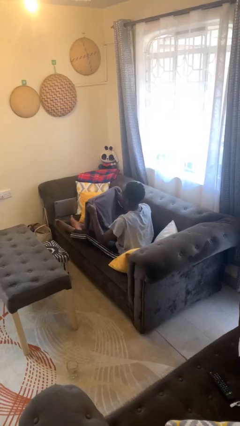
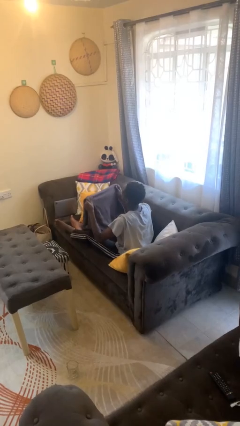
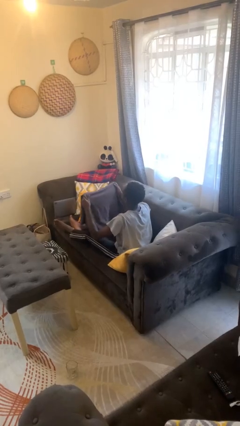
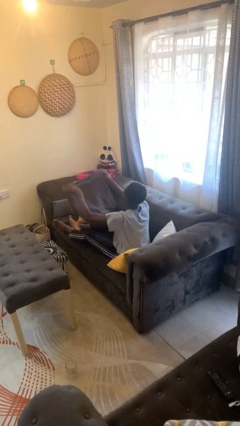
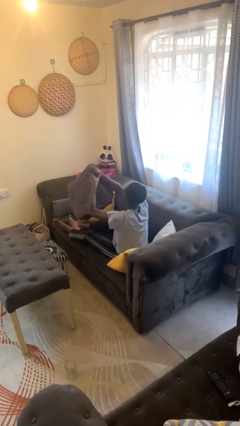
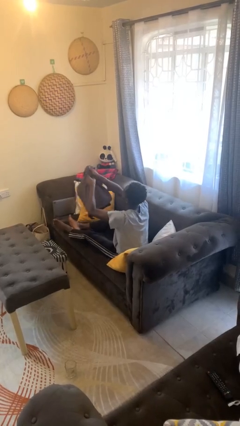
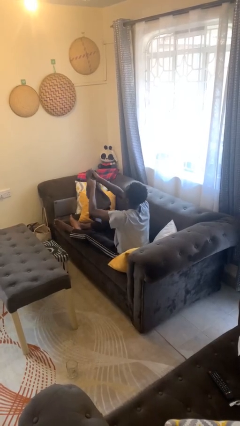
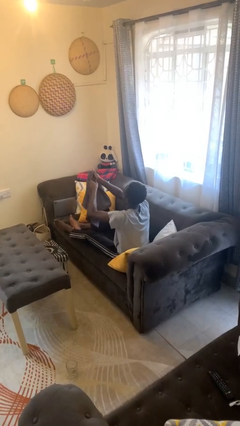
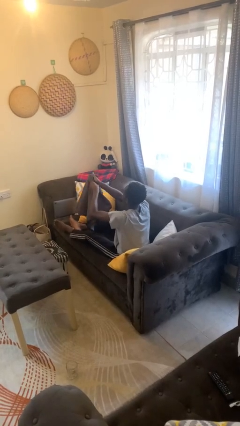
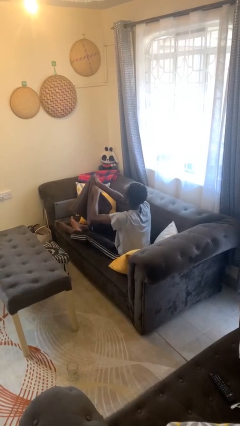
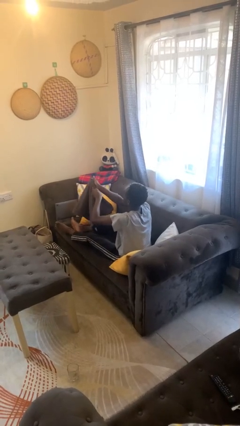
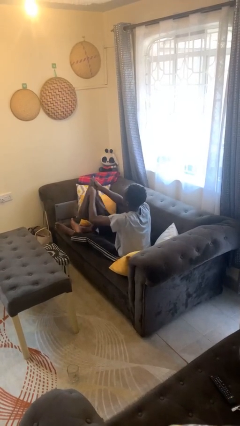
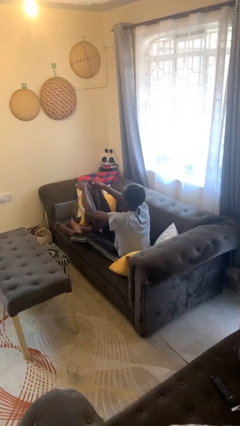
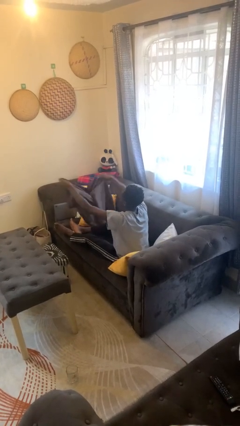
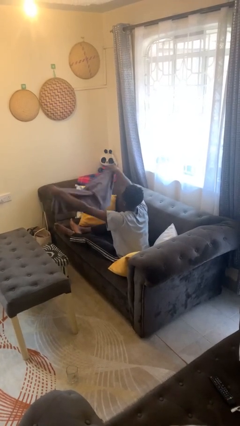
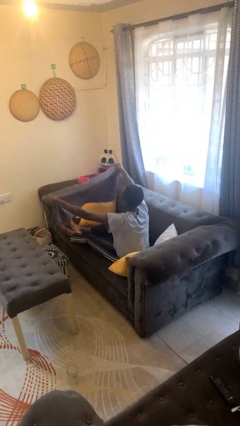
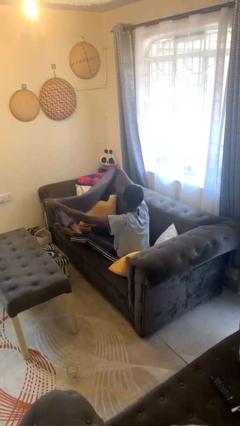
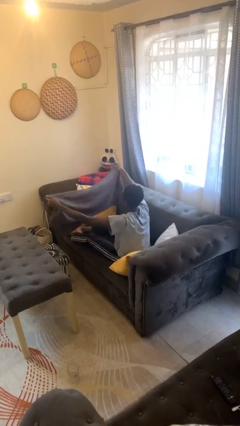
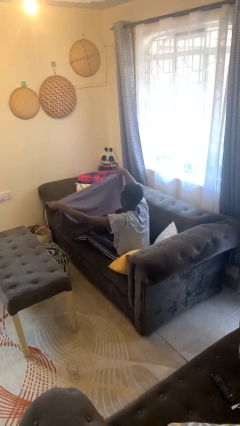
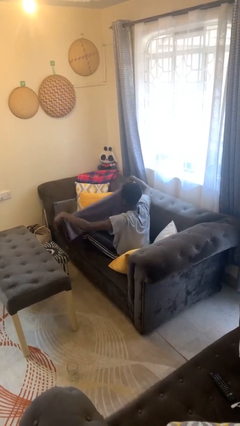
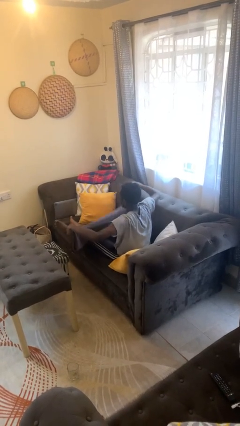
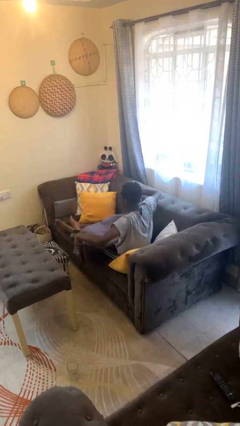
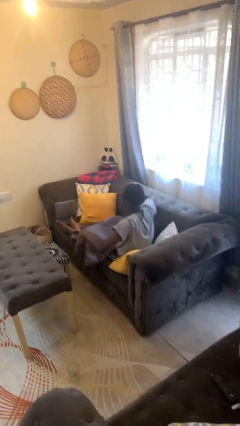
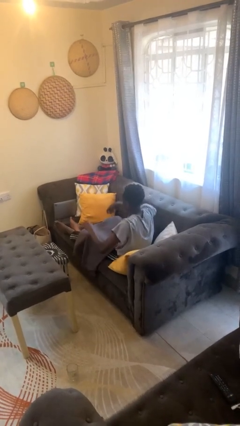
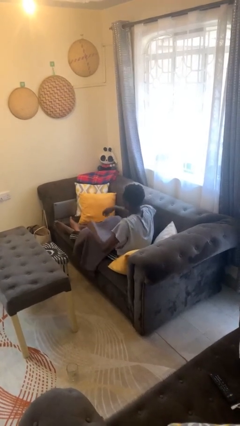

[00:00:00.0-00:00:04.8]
person unfolds blanket

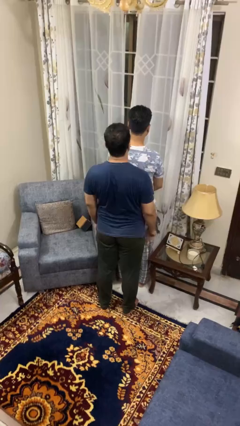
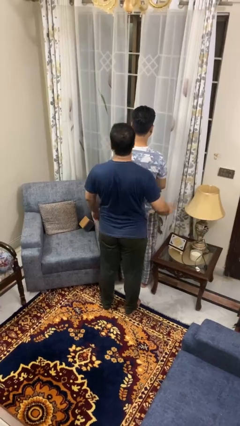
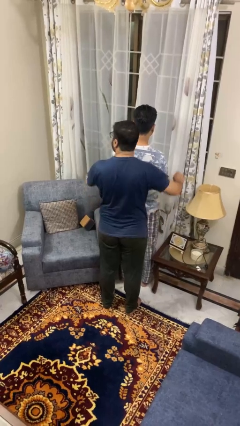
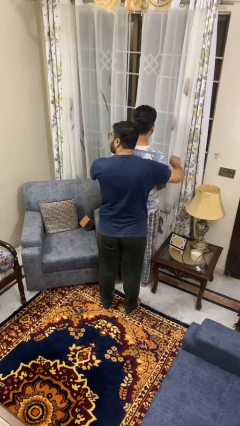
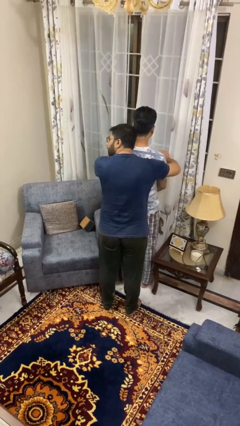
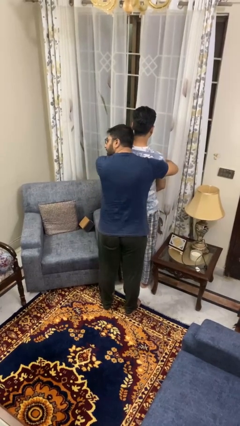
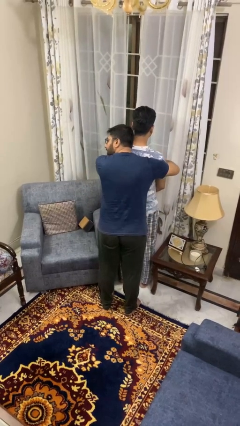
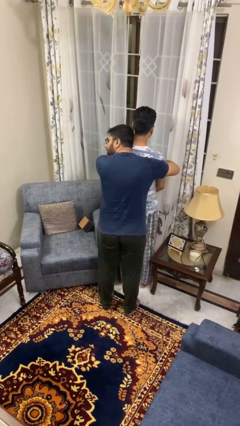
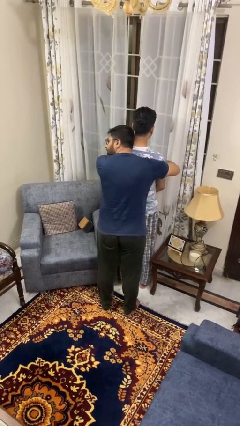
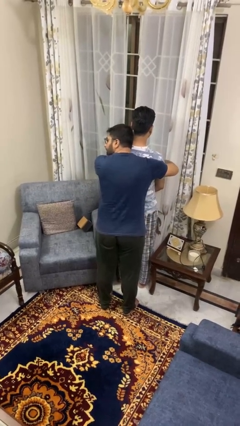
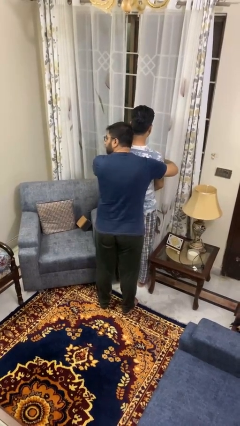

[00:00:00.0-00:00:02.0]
person hugs person from behind

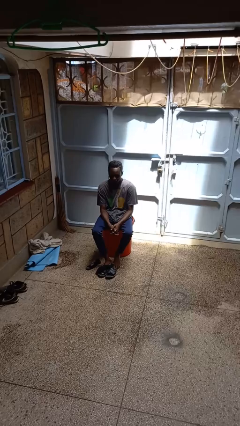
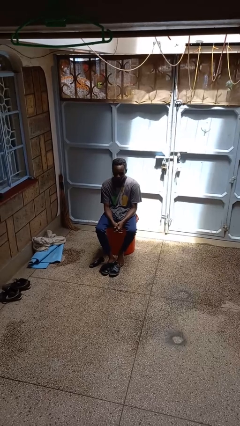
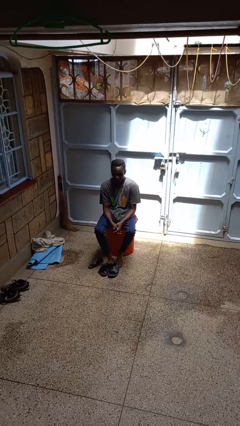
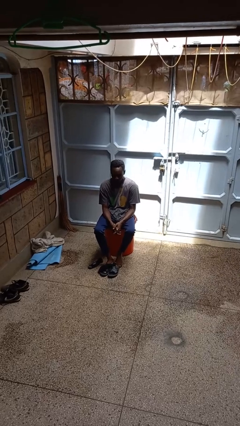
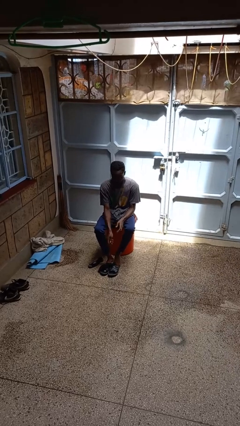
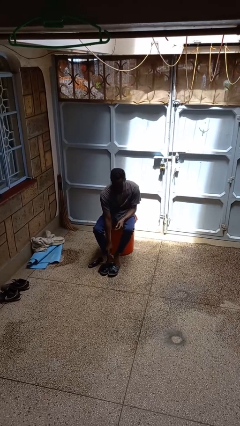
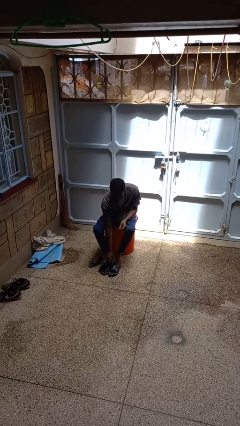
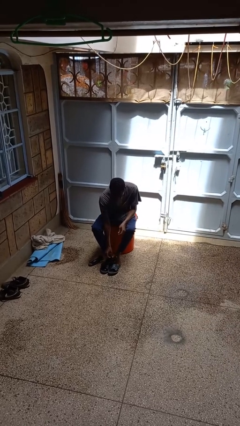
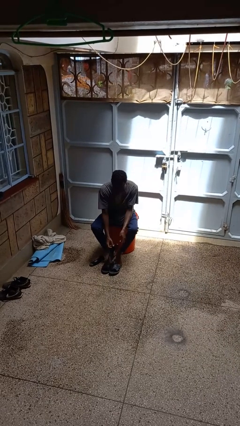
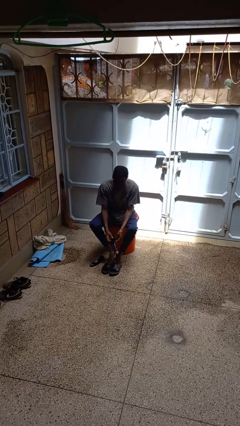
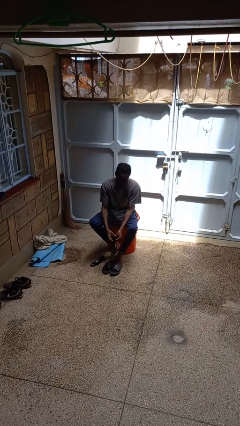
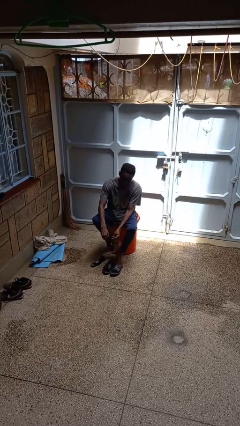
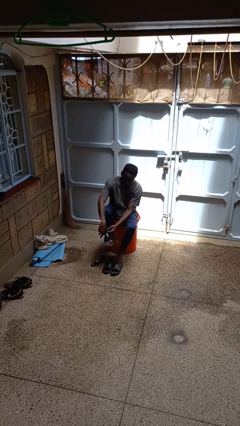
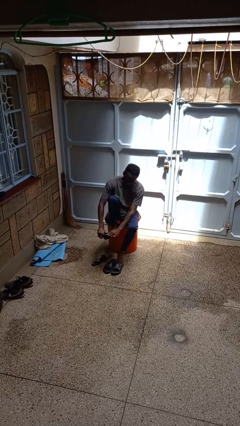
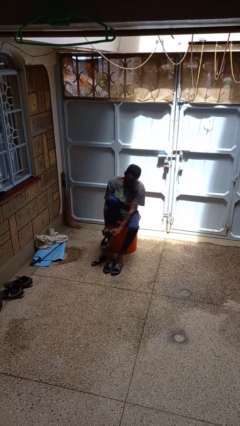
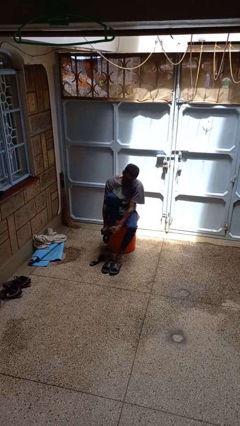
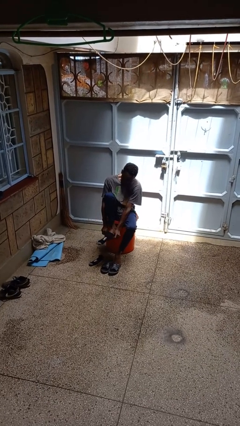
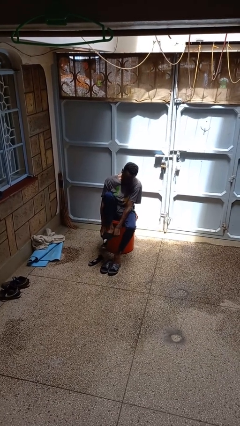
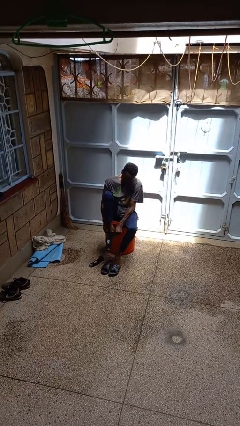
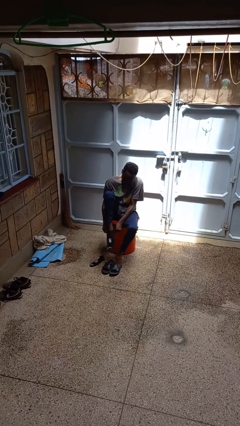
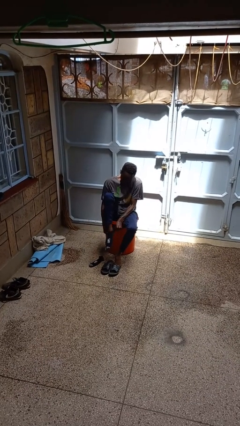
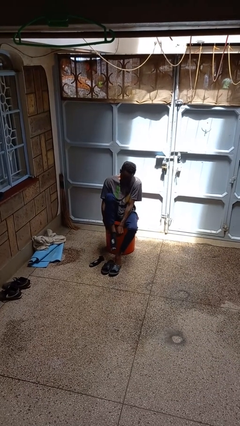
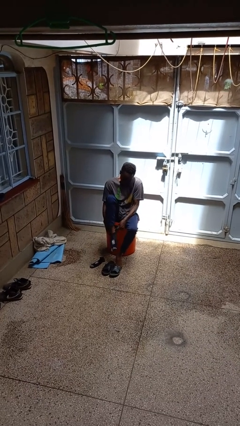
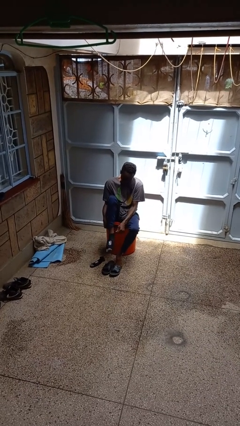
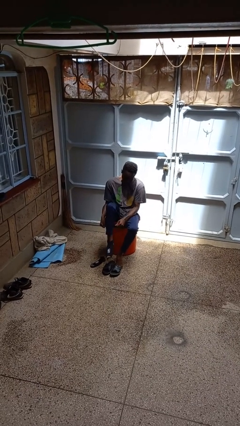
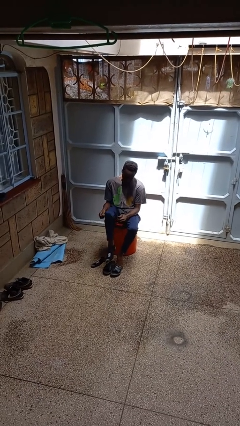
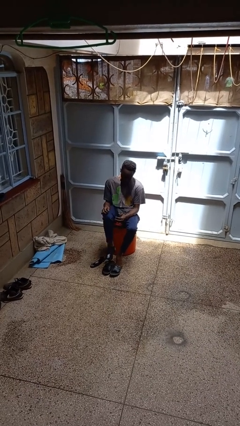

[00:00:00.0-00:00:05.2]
person puts on socks

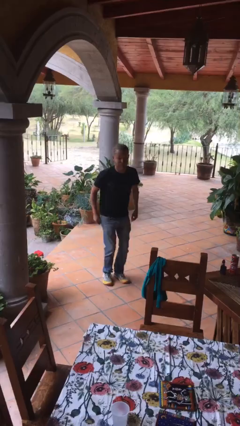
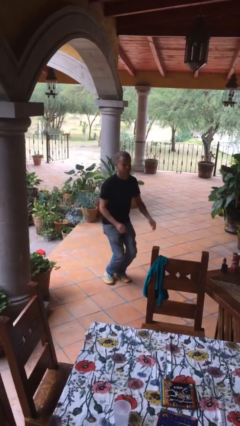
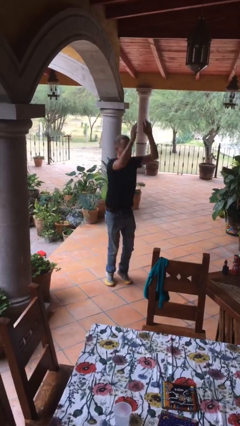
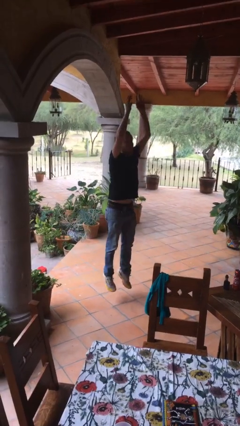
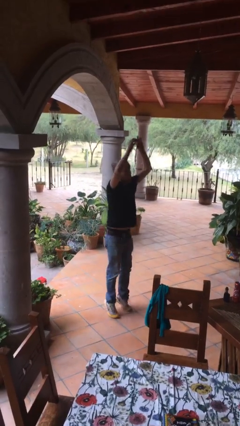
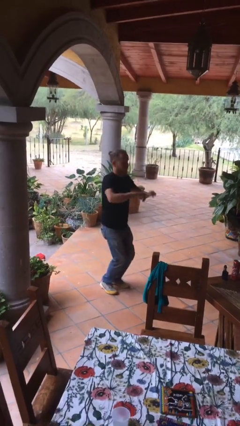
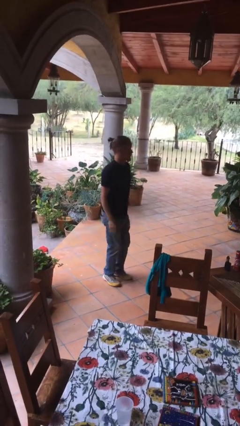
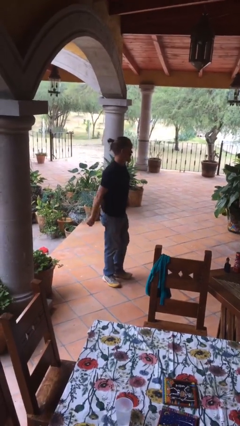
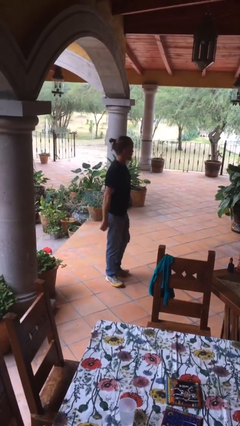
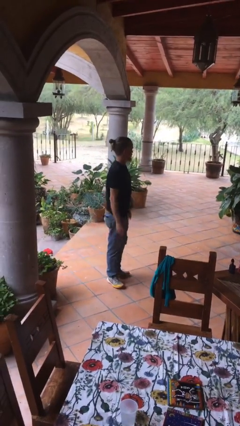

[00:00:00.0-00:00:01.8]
person jumps

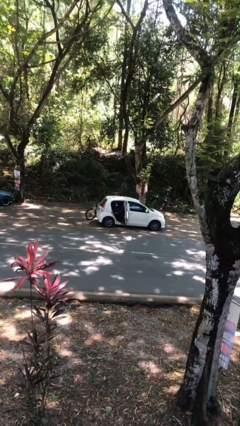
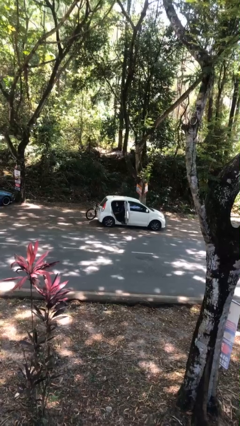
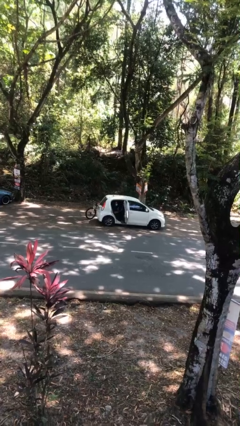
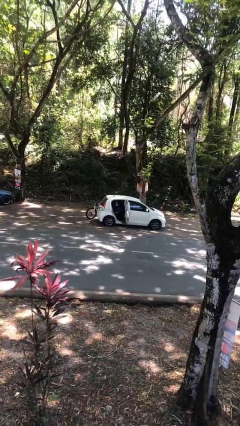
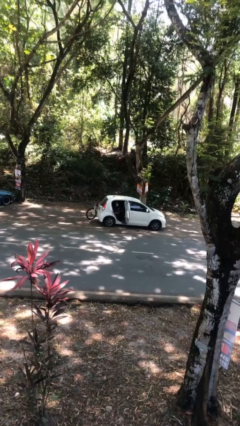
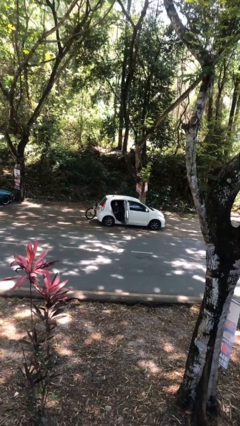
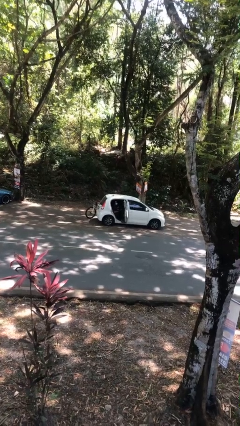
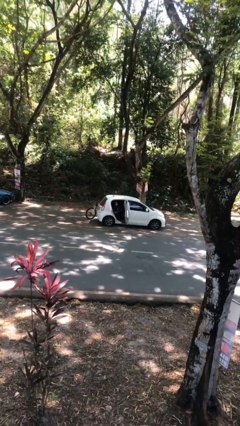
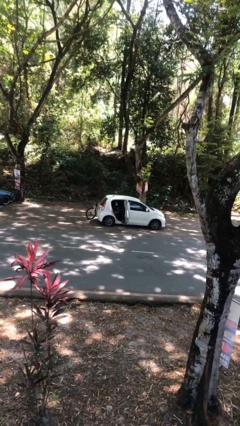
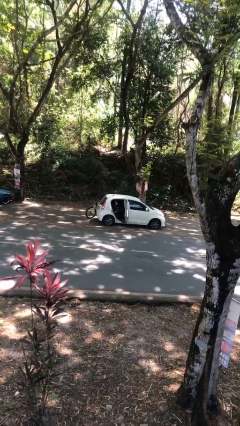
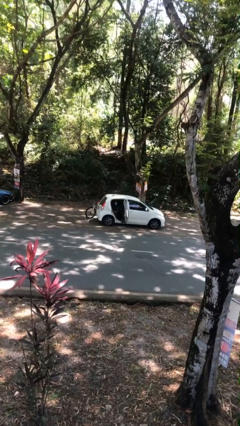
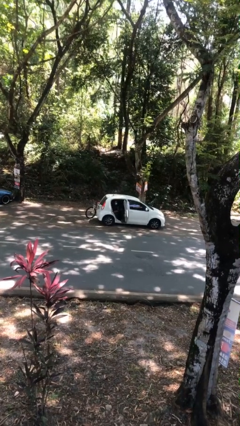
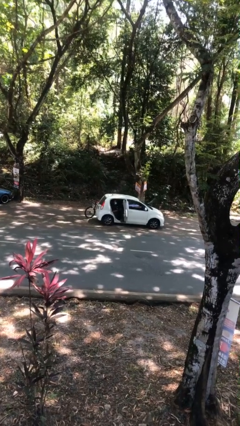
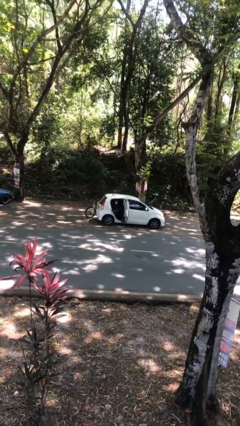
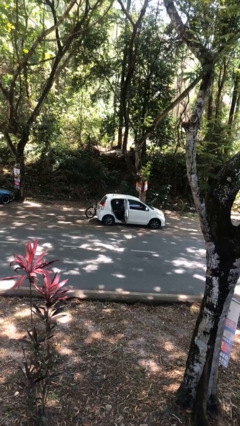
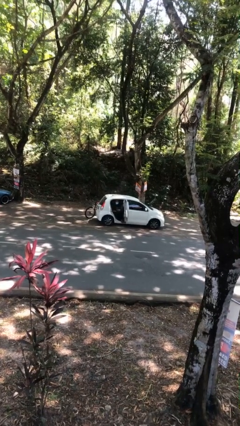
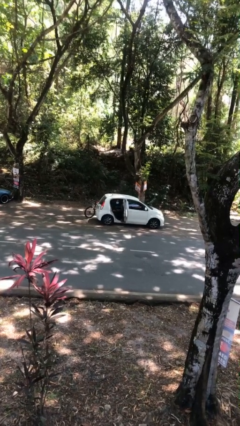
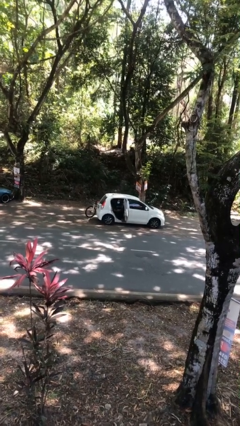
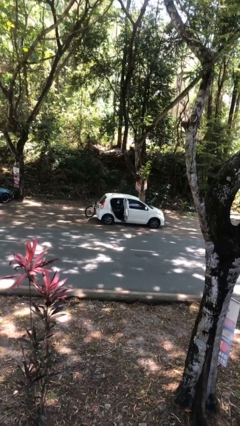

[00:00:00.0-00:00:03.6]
person interacts with laptop

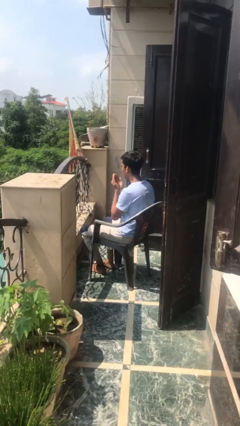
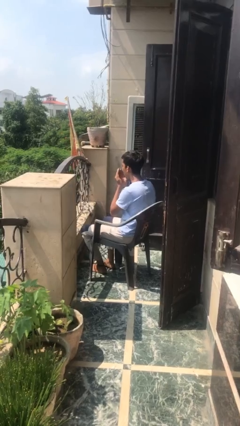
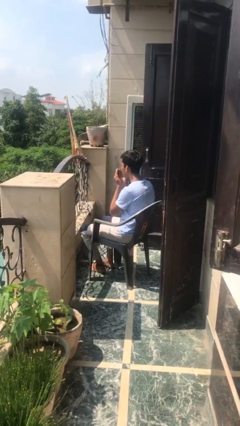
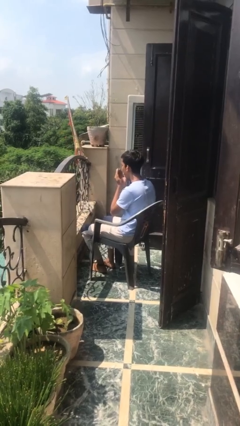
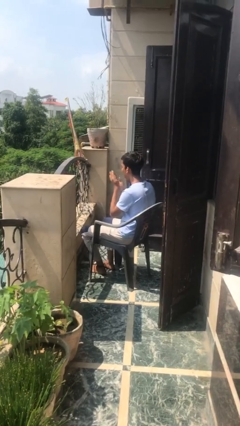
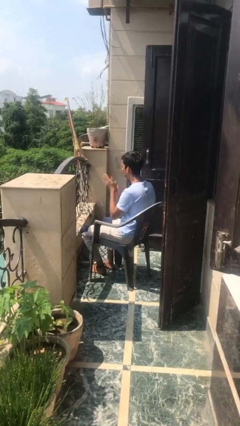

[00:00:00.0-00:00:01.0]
person blows into hands
